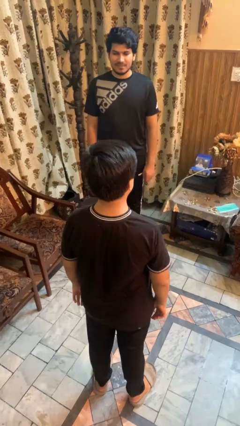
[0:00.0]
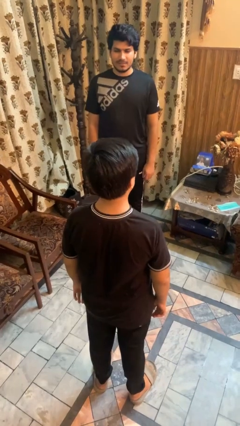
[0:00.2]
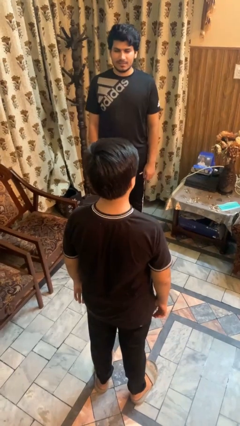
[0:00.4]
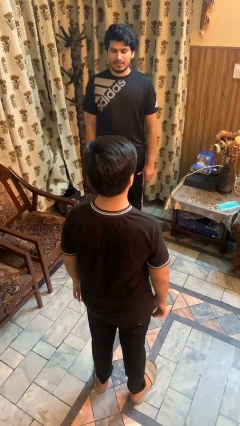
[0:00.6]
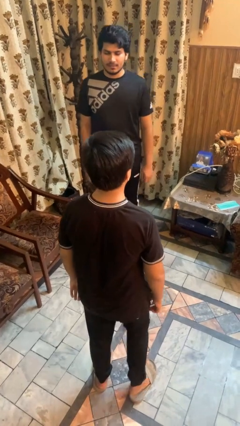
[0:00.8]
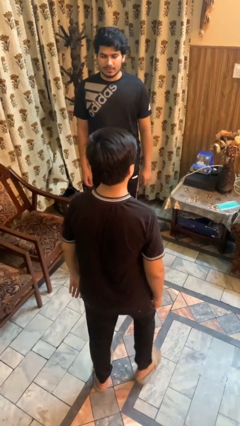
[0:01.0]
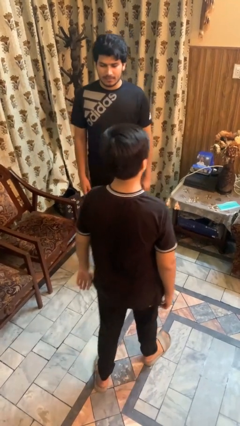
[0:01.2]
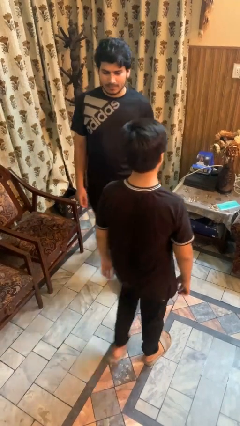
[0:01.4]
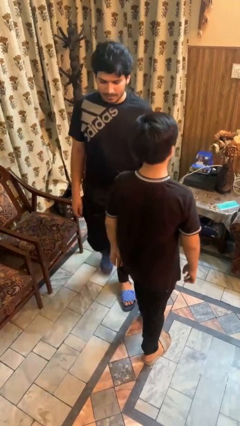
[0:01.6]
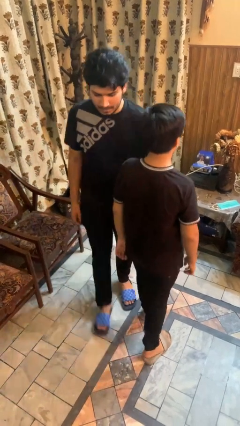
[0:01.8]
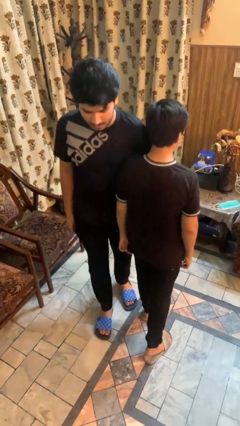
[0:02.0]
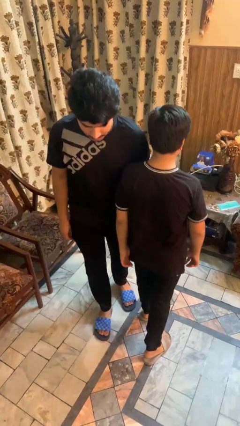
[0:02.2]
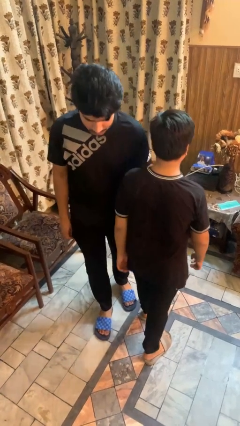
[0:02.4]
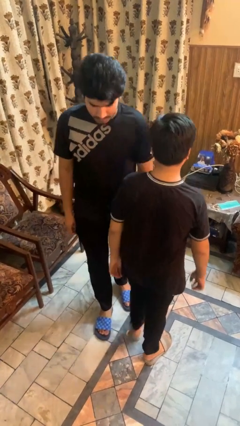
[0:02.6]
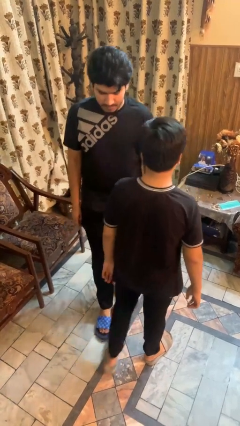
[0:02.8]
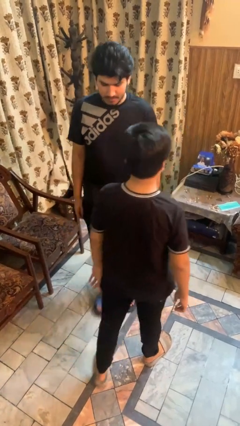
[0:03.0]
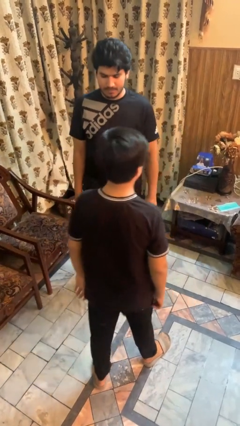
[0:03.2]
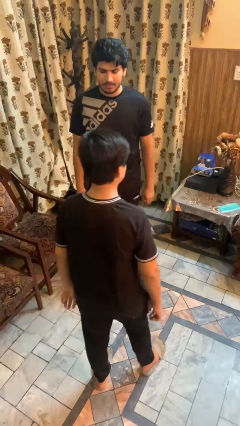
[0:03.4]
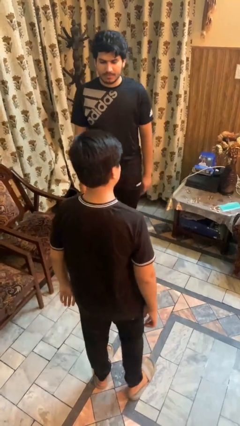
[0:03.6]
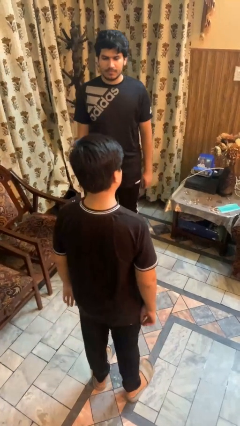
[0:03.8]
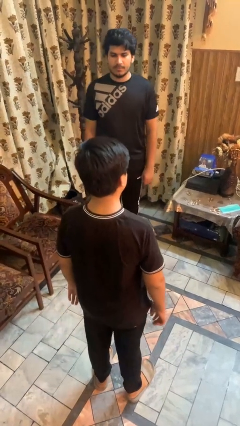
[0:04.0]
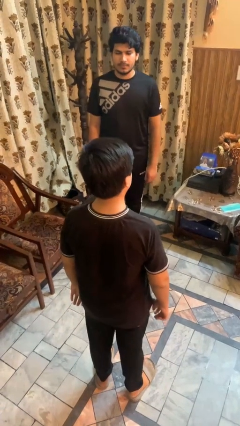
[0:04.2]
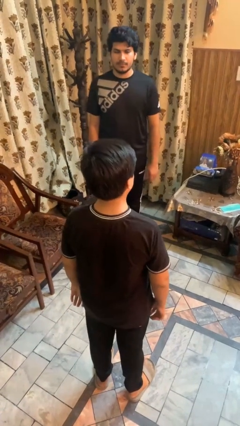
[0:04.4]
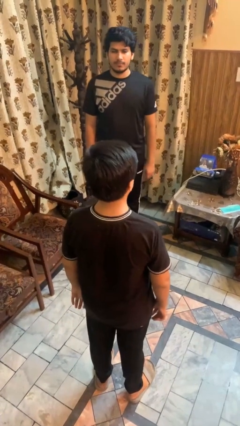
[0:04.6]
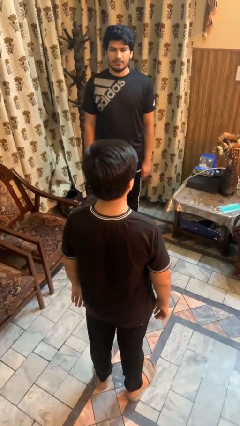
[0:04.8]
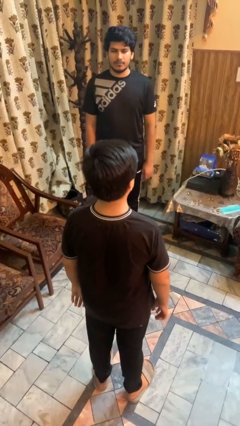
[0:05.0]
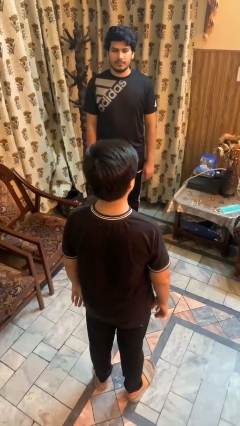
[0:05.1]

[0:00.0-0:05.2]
person bumps into person

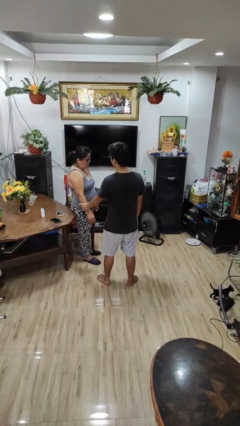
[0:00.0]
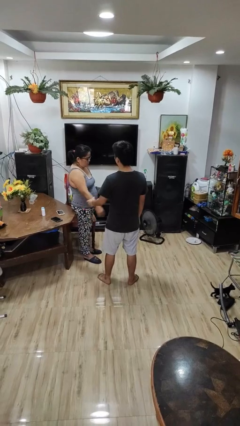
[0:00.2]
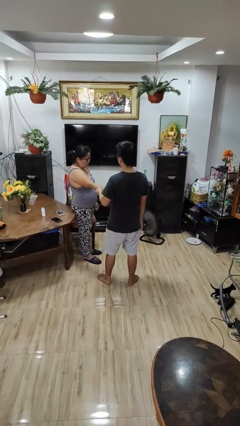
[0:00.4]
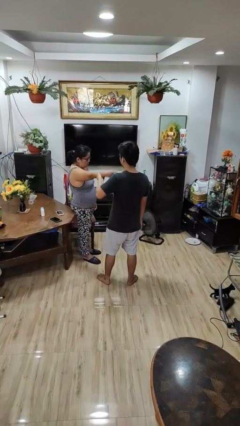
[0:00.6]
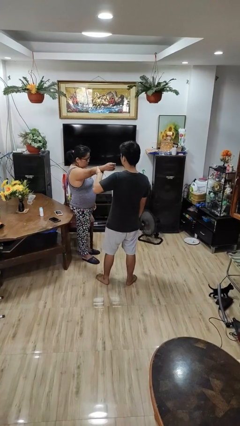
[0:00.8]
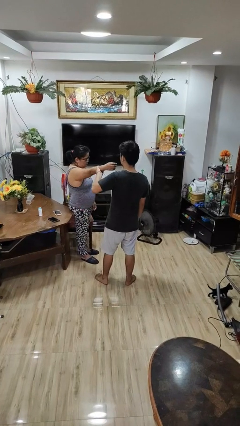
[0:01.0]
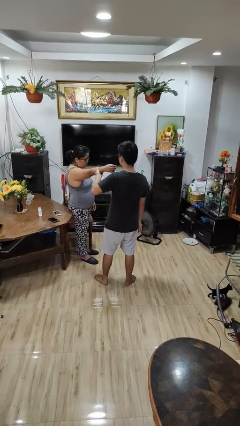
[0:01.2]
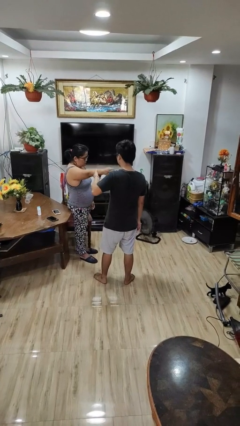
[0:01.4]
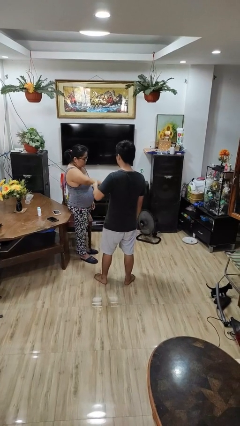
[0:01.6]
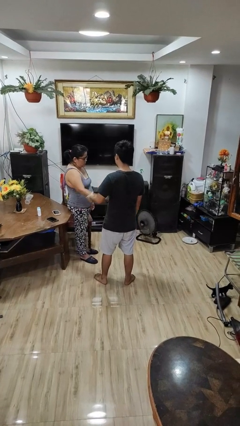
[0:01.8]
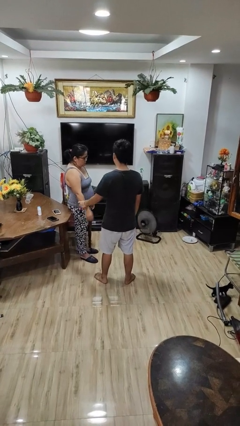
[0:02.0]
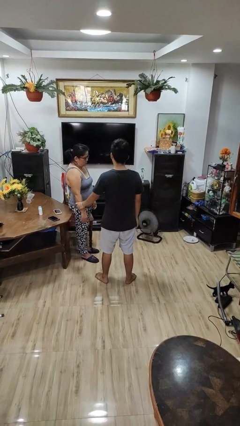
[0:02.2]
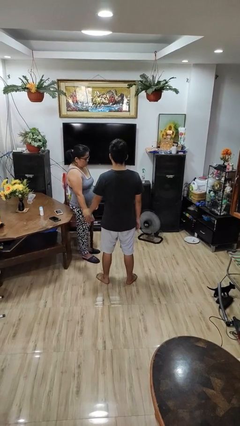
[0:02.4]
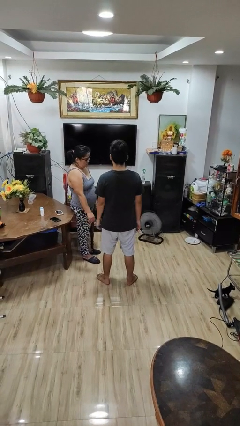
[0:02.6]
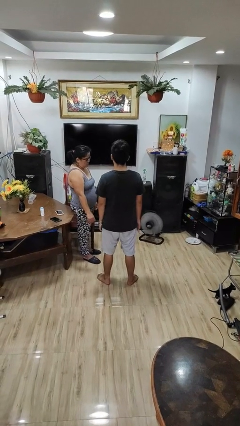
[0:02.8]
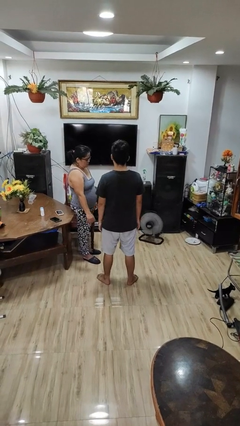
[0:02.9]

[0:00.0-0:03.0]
person grabs person by forearm

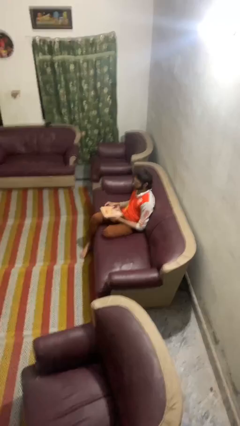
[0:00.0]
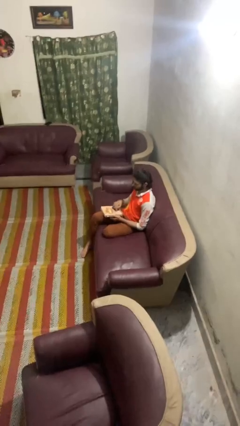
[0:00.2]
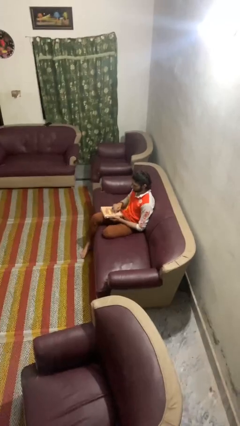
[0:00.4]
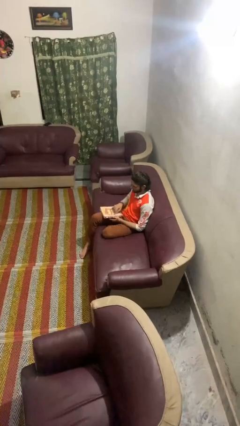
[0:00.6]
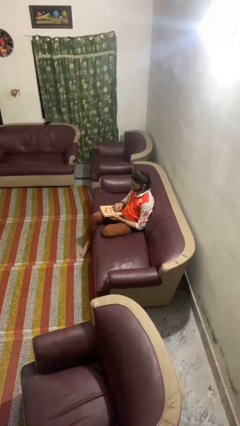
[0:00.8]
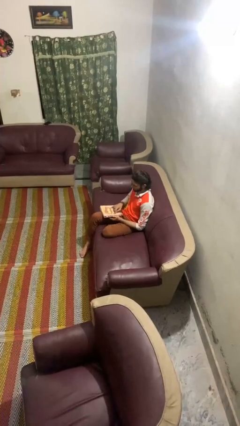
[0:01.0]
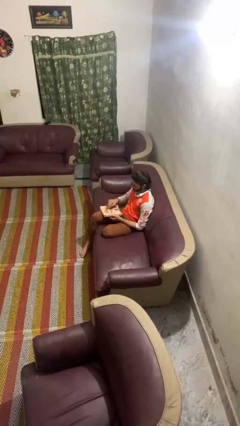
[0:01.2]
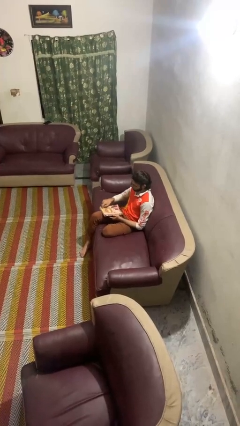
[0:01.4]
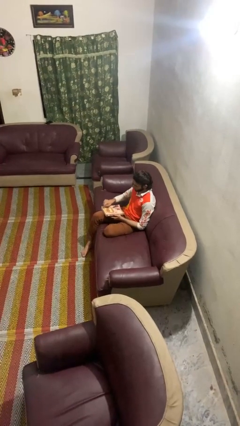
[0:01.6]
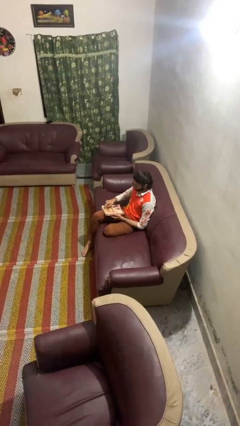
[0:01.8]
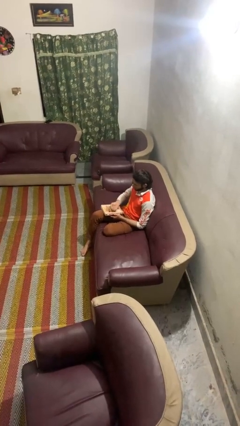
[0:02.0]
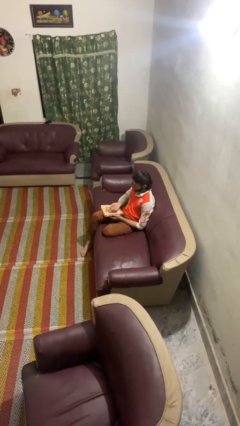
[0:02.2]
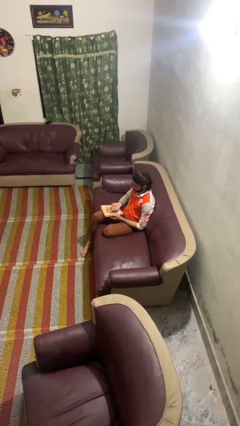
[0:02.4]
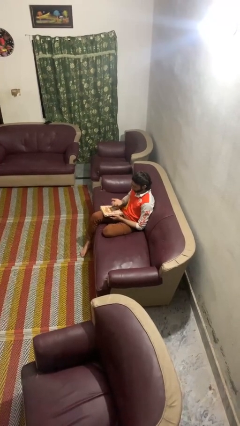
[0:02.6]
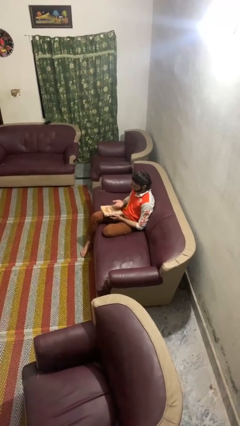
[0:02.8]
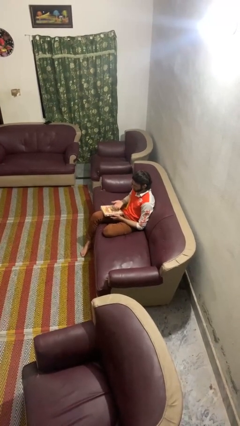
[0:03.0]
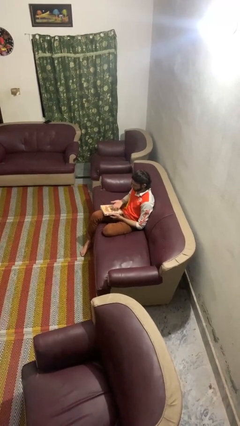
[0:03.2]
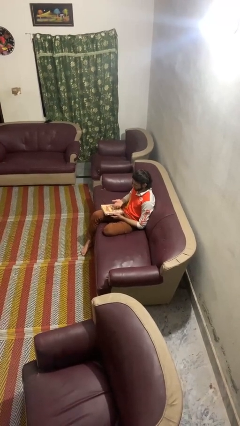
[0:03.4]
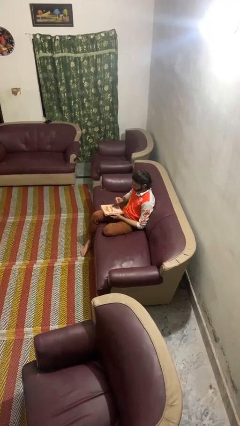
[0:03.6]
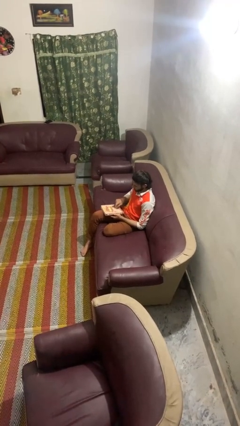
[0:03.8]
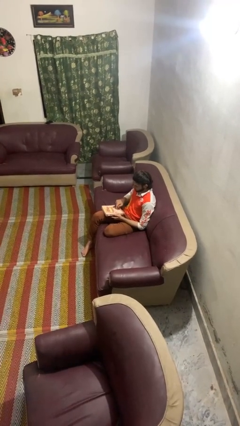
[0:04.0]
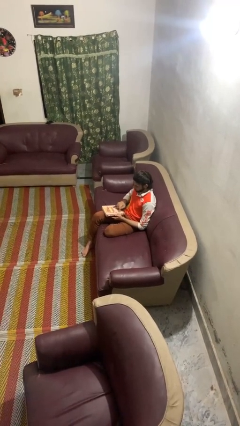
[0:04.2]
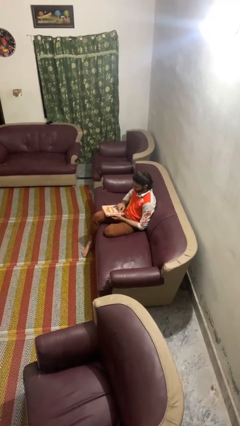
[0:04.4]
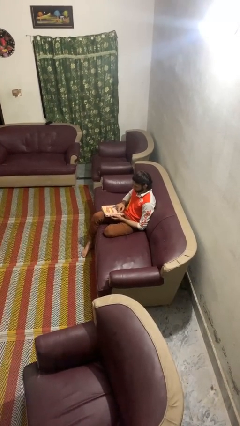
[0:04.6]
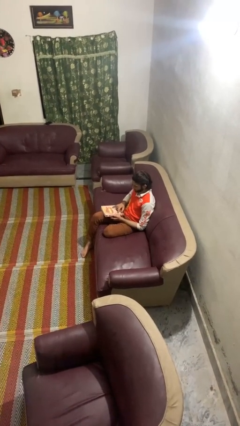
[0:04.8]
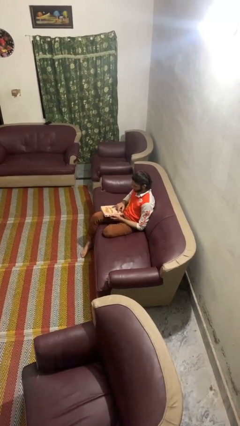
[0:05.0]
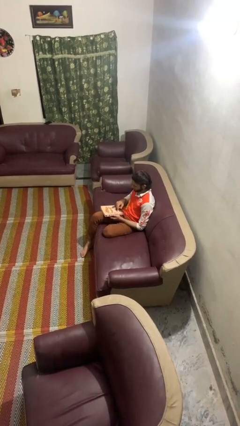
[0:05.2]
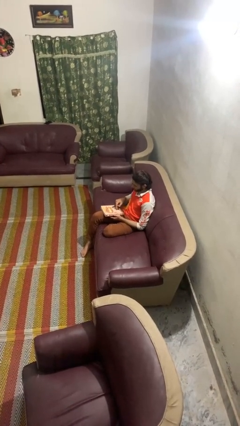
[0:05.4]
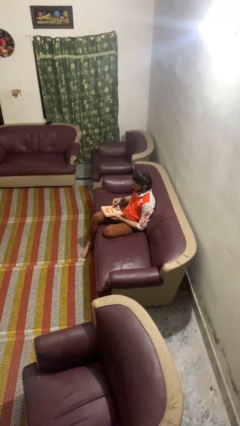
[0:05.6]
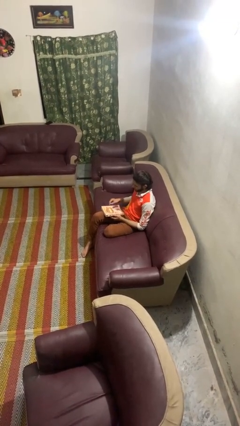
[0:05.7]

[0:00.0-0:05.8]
person taps object with finger

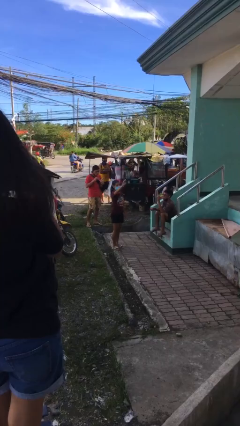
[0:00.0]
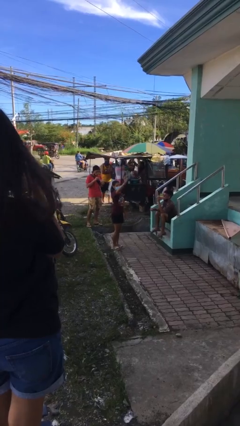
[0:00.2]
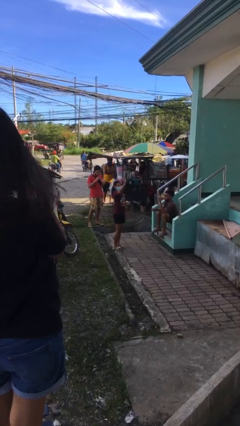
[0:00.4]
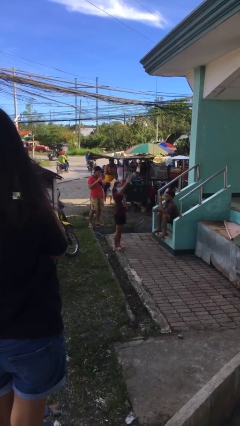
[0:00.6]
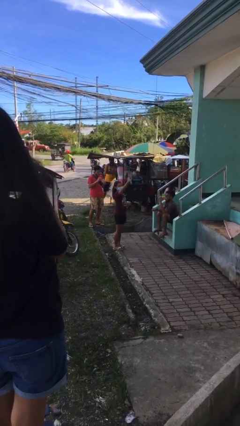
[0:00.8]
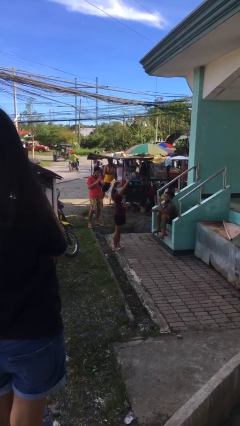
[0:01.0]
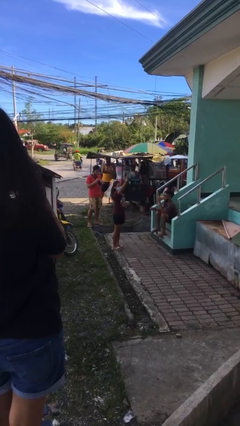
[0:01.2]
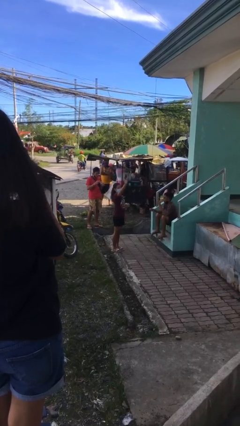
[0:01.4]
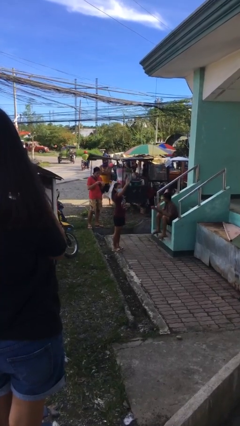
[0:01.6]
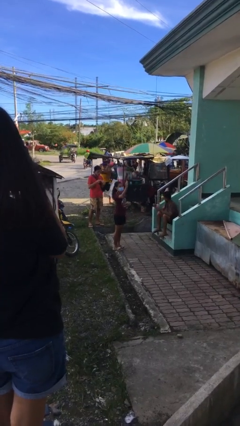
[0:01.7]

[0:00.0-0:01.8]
person waves at person

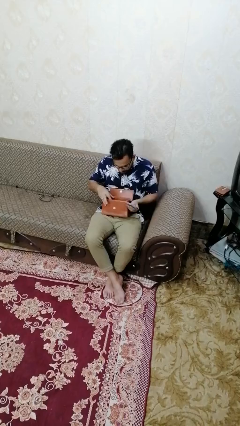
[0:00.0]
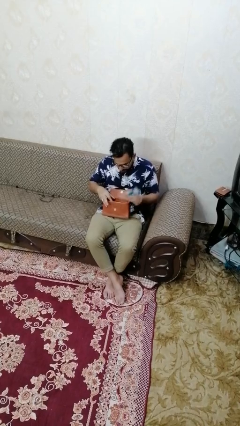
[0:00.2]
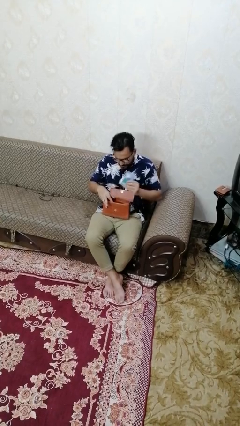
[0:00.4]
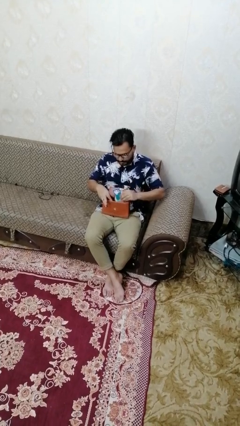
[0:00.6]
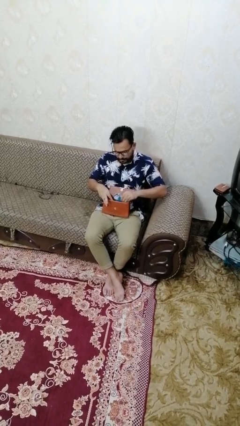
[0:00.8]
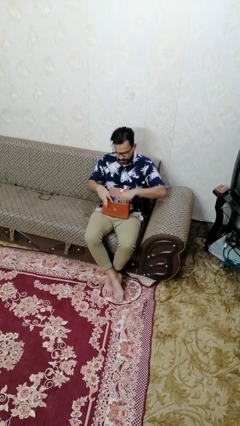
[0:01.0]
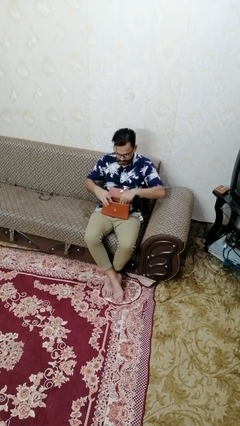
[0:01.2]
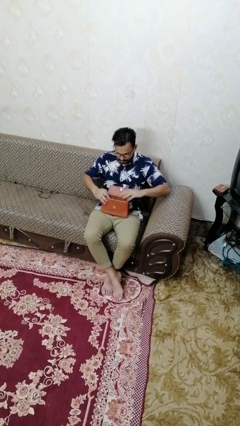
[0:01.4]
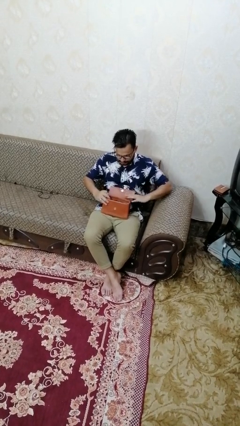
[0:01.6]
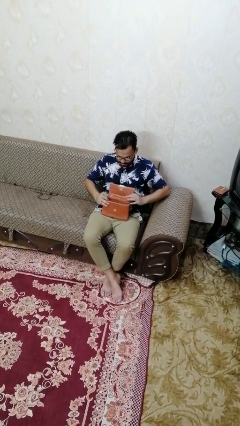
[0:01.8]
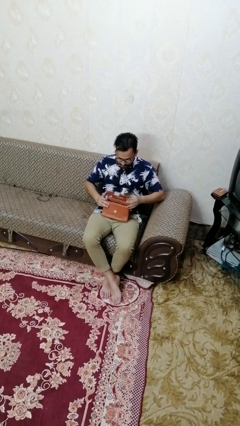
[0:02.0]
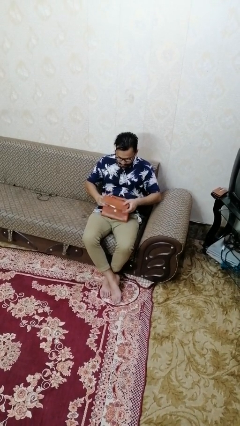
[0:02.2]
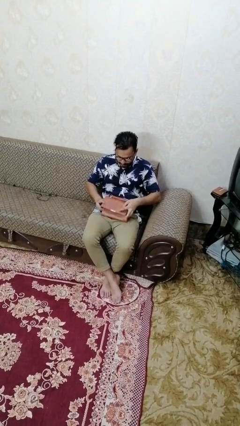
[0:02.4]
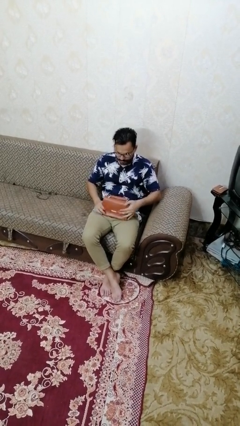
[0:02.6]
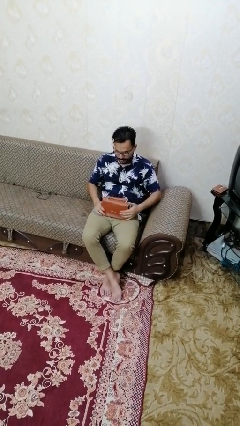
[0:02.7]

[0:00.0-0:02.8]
person puts object into purse
